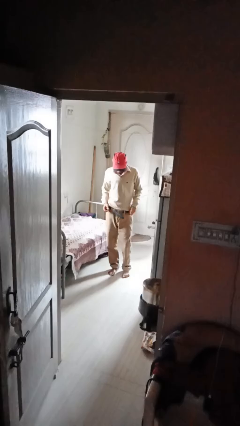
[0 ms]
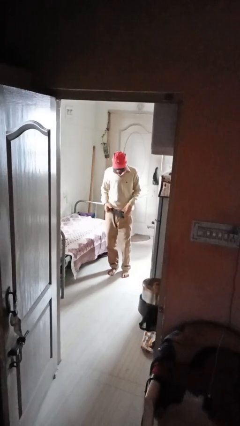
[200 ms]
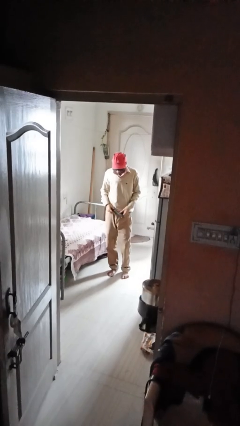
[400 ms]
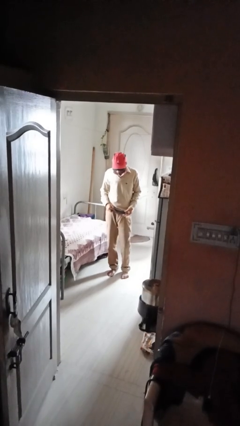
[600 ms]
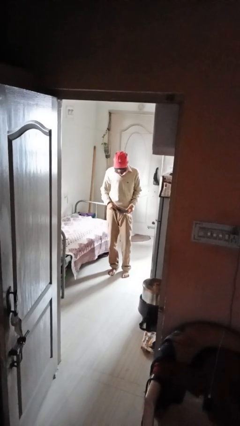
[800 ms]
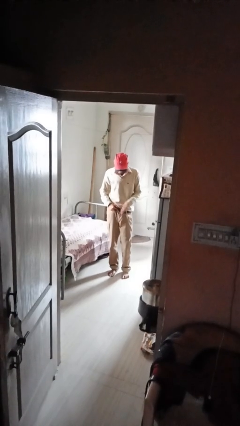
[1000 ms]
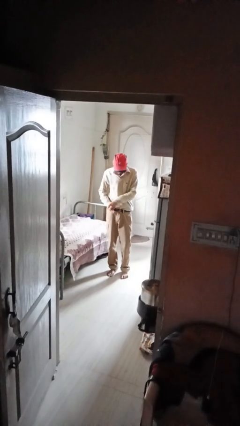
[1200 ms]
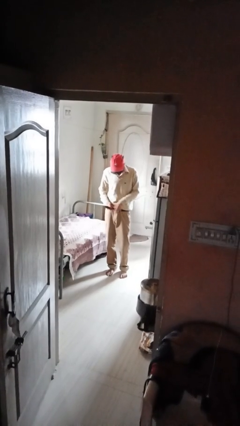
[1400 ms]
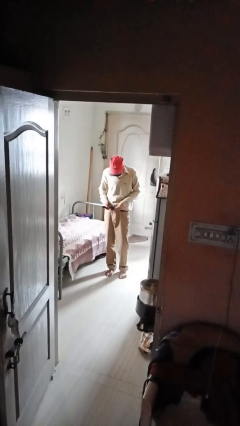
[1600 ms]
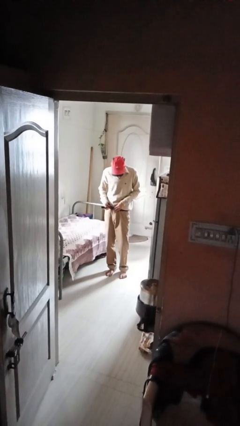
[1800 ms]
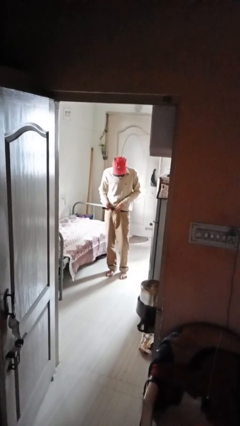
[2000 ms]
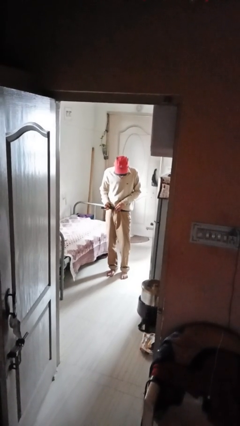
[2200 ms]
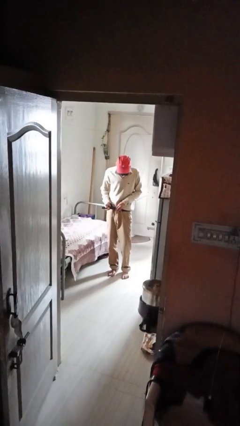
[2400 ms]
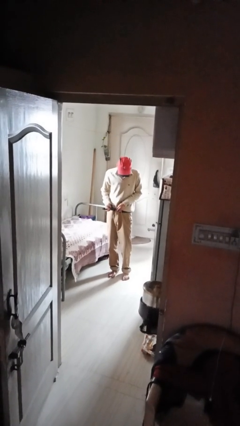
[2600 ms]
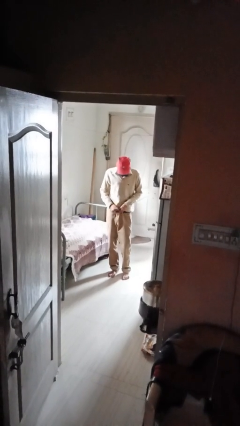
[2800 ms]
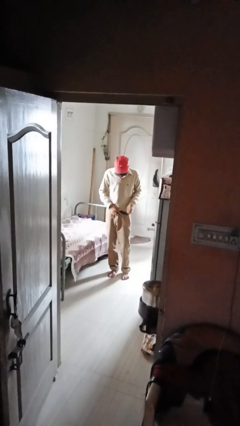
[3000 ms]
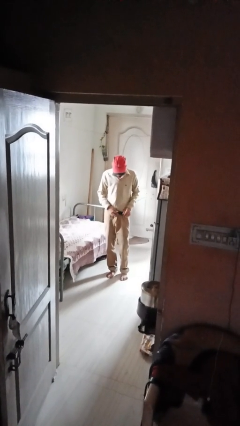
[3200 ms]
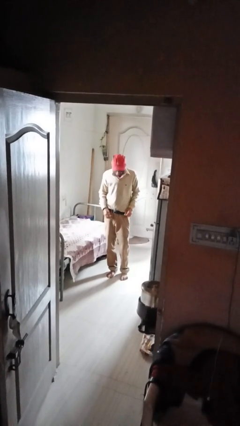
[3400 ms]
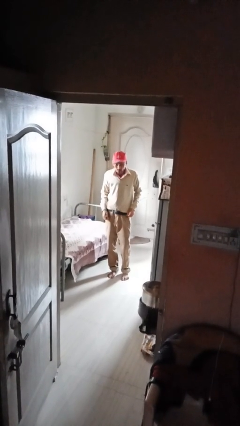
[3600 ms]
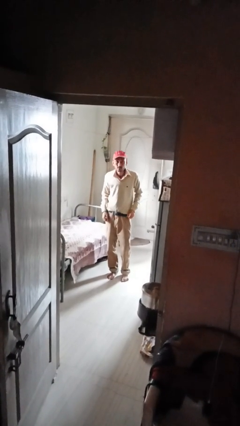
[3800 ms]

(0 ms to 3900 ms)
person puts on belt

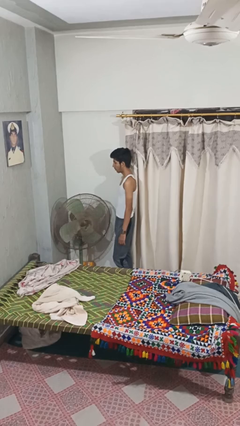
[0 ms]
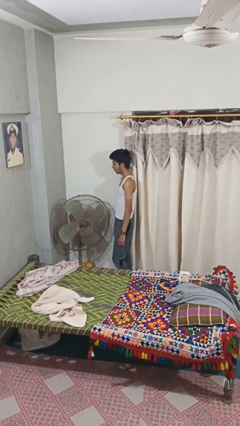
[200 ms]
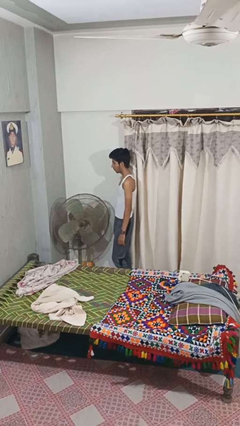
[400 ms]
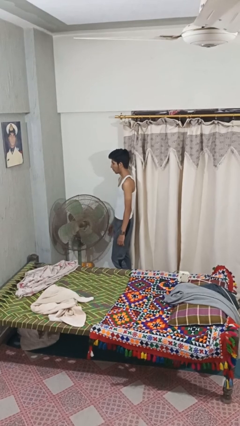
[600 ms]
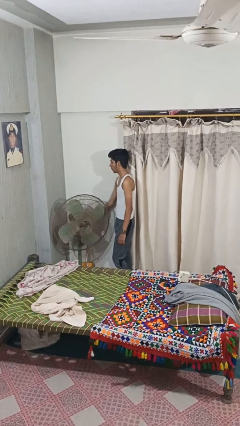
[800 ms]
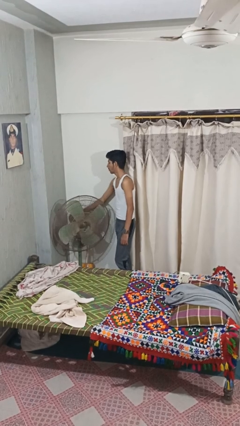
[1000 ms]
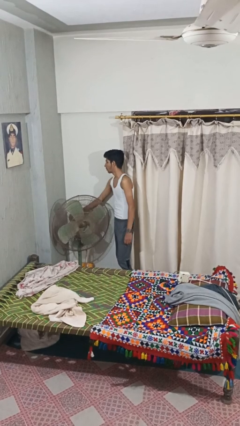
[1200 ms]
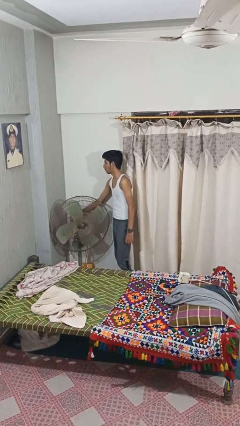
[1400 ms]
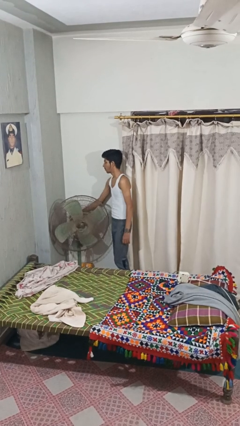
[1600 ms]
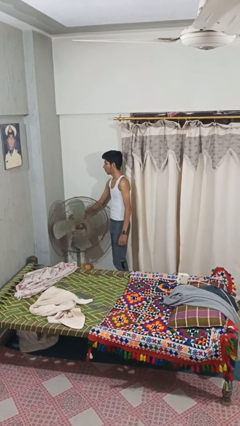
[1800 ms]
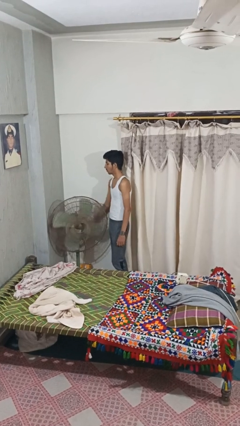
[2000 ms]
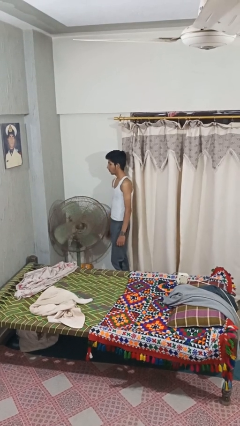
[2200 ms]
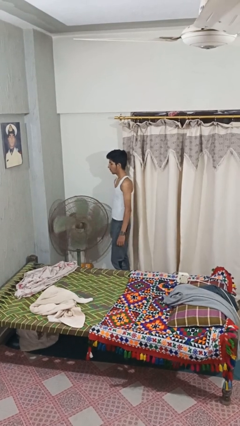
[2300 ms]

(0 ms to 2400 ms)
person turns on fan

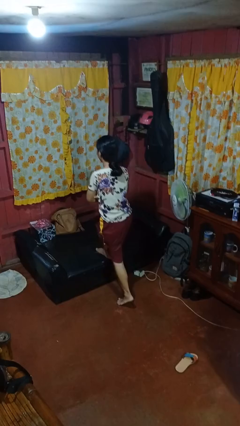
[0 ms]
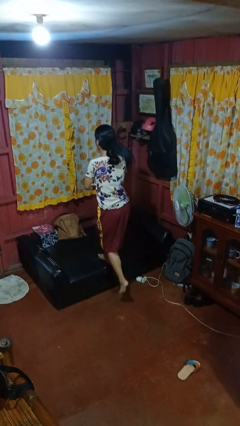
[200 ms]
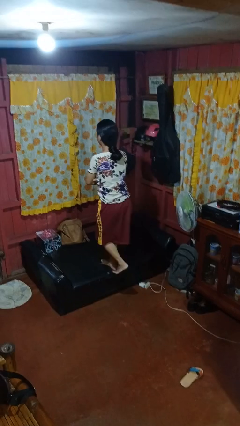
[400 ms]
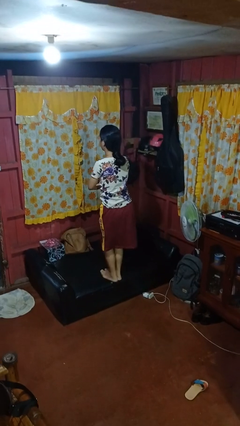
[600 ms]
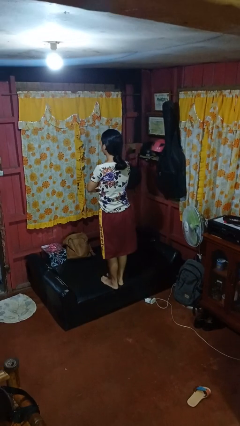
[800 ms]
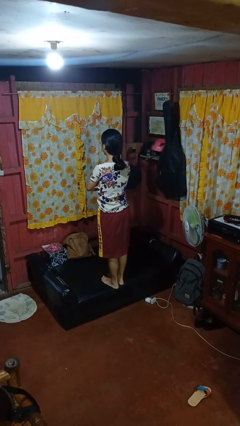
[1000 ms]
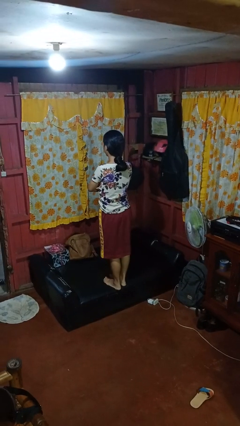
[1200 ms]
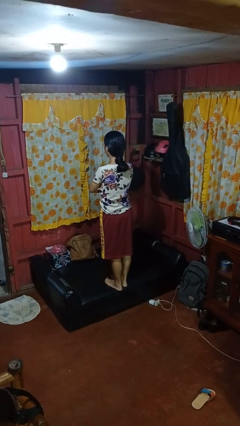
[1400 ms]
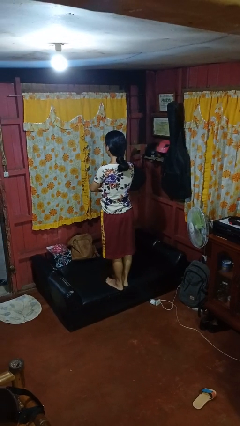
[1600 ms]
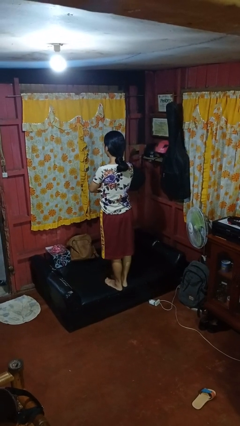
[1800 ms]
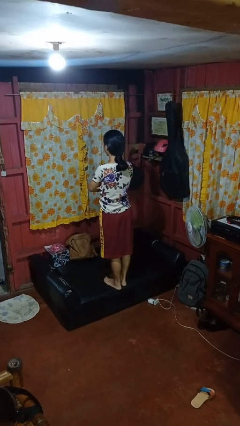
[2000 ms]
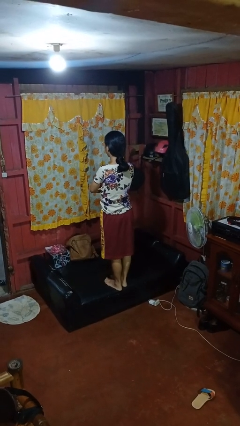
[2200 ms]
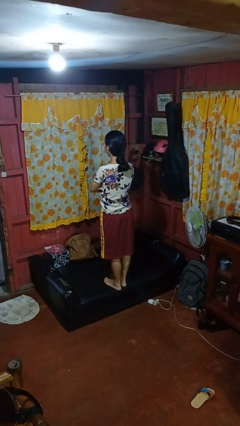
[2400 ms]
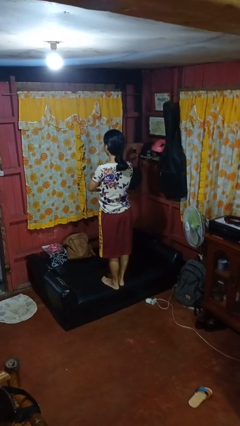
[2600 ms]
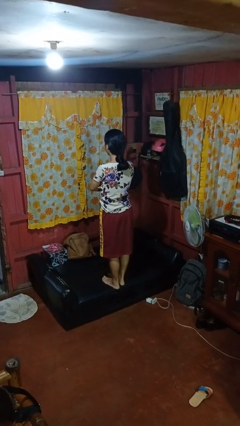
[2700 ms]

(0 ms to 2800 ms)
person climbs on couch

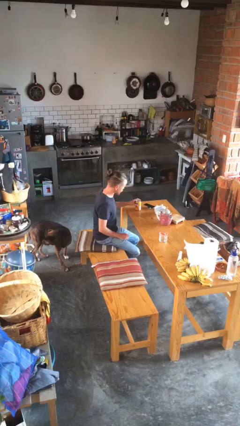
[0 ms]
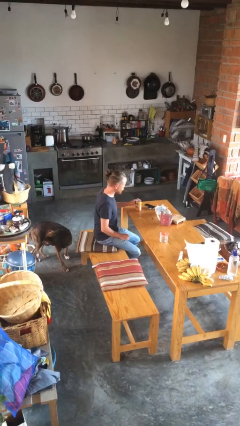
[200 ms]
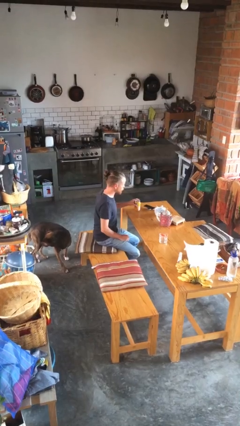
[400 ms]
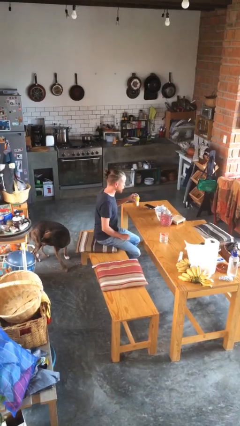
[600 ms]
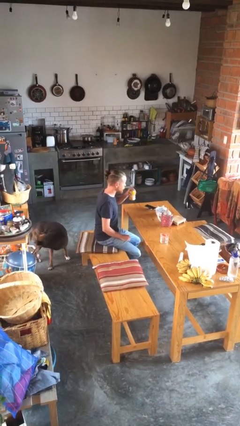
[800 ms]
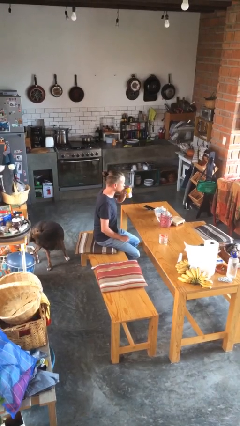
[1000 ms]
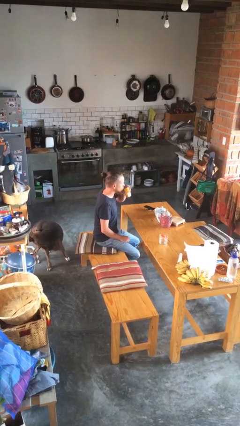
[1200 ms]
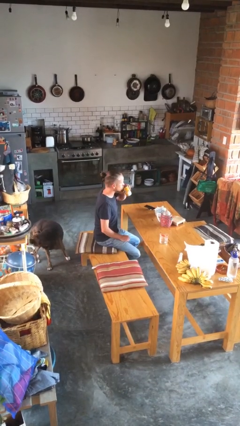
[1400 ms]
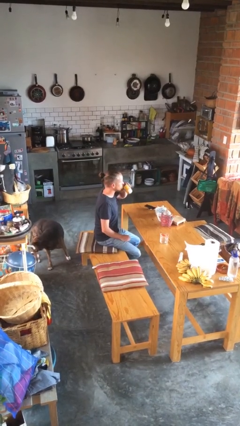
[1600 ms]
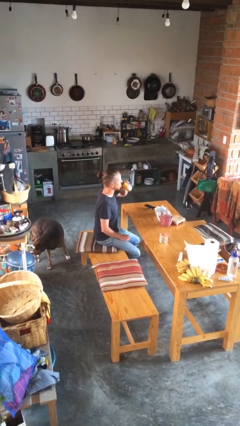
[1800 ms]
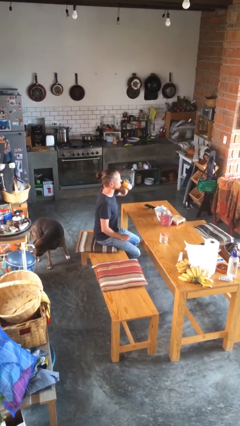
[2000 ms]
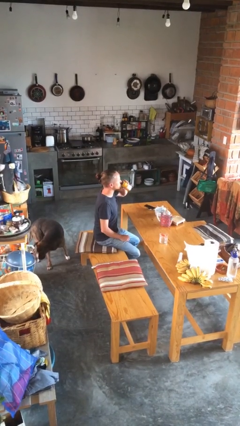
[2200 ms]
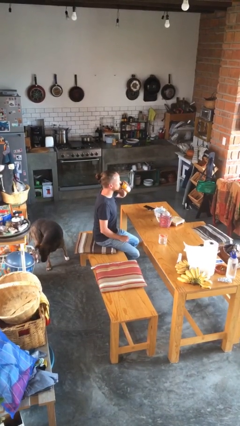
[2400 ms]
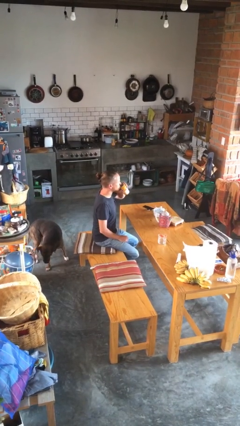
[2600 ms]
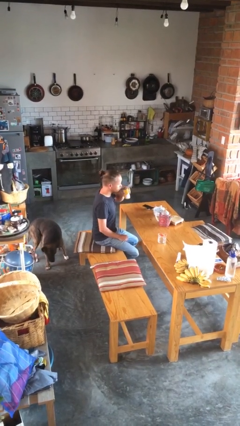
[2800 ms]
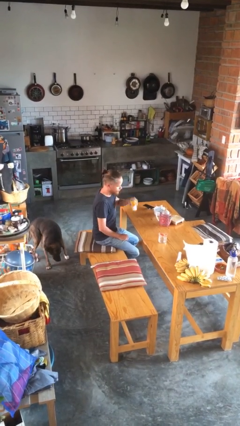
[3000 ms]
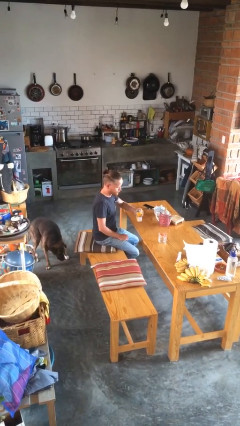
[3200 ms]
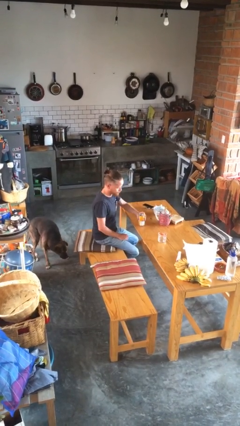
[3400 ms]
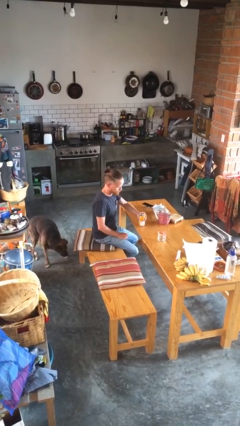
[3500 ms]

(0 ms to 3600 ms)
person drinks from beverage can

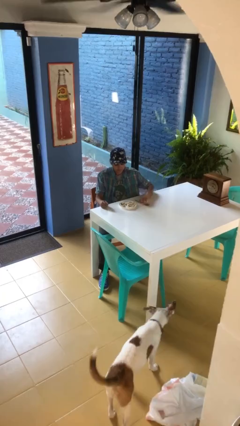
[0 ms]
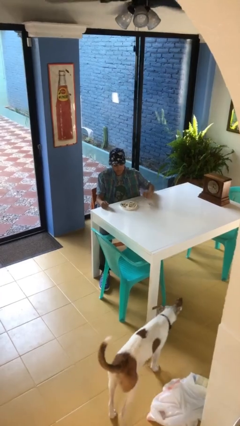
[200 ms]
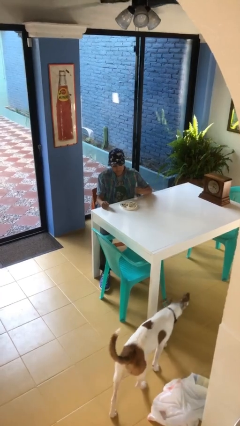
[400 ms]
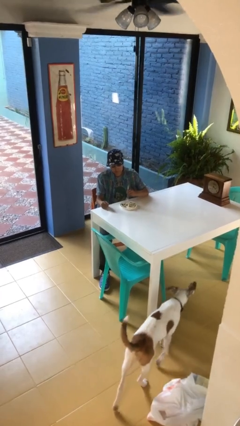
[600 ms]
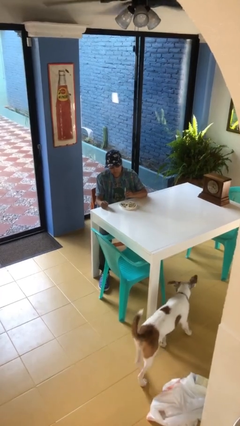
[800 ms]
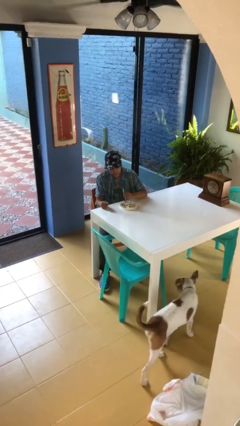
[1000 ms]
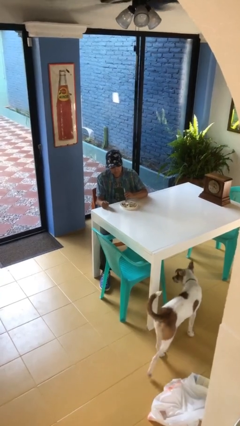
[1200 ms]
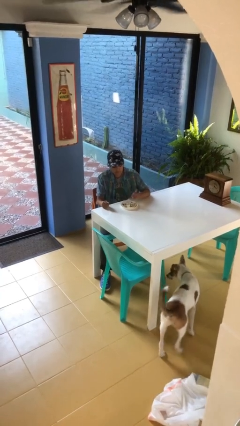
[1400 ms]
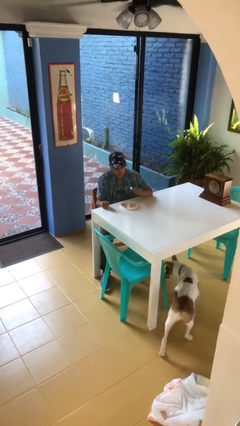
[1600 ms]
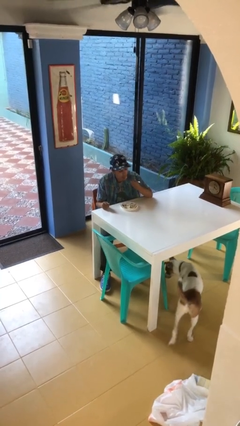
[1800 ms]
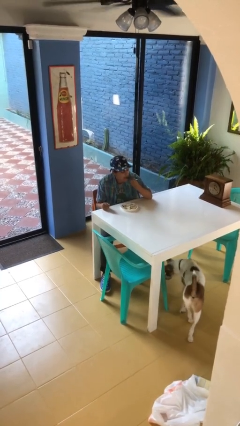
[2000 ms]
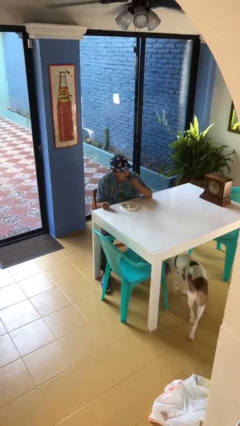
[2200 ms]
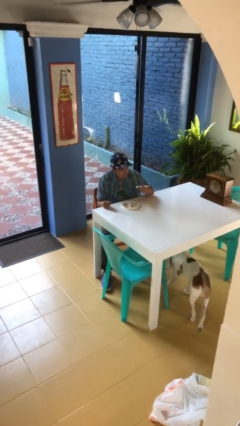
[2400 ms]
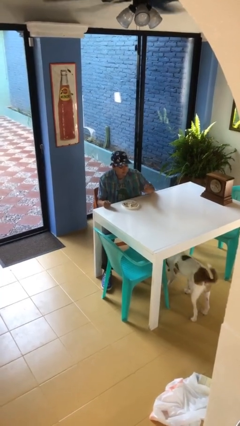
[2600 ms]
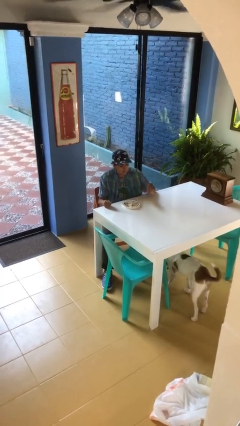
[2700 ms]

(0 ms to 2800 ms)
person eats with utensil

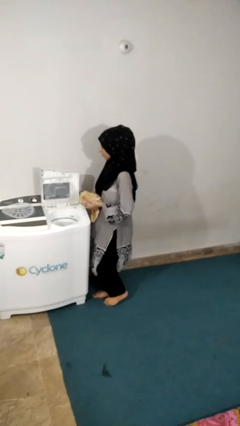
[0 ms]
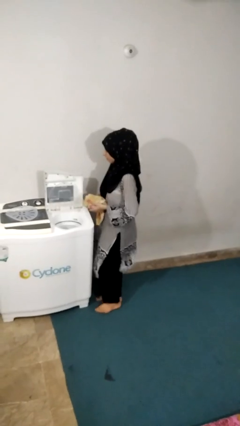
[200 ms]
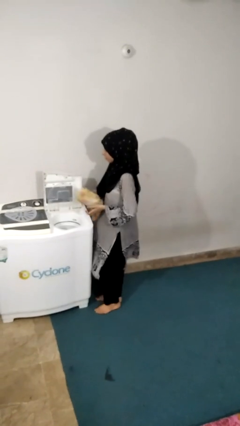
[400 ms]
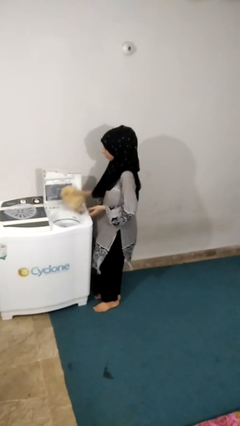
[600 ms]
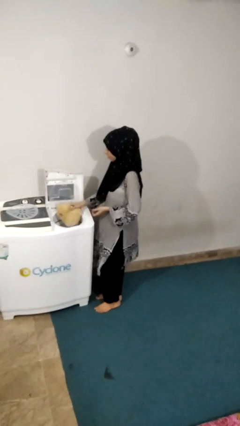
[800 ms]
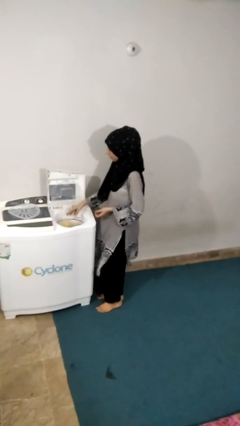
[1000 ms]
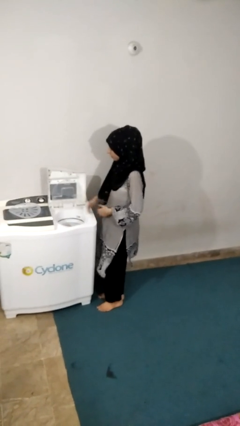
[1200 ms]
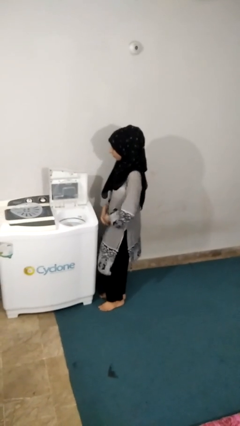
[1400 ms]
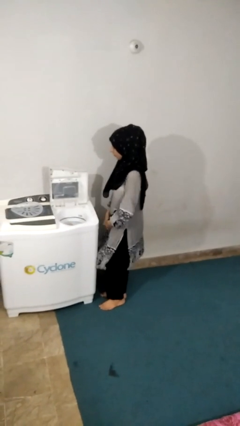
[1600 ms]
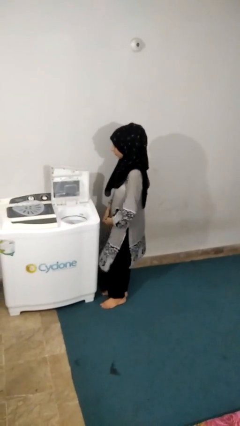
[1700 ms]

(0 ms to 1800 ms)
person loads dryer

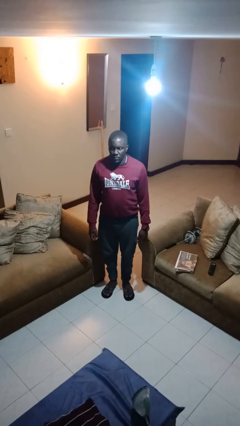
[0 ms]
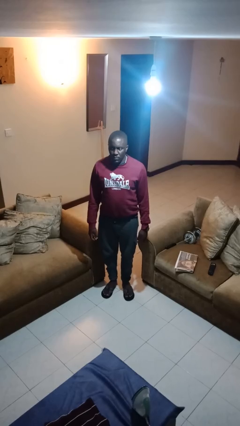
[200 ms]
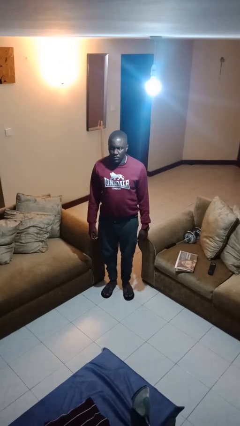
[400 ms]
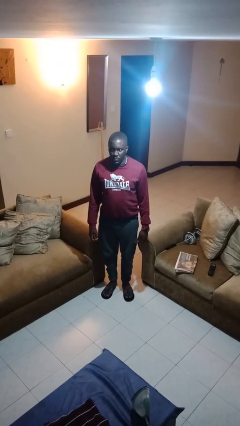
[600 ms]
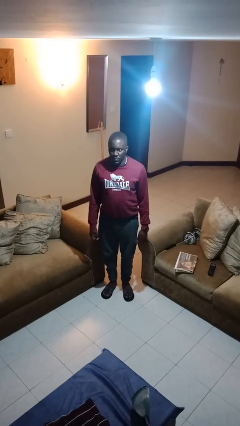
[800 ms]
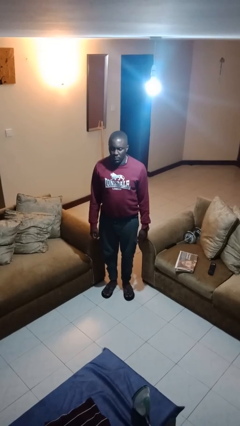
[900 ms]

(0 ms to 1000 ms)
person stands up
